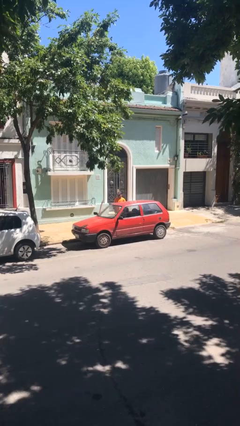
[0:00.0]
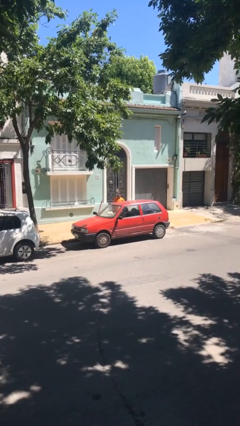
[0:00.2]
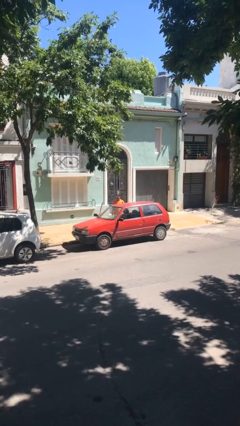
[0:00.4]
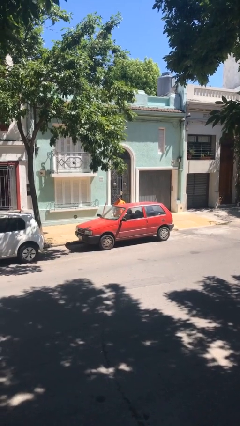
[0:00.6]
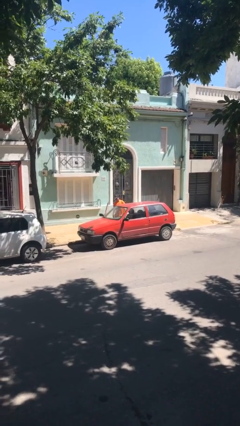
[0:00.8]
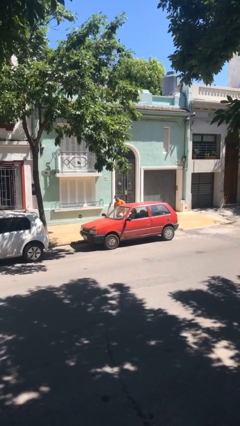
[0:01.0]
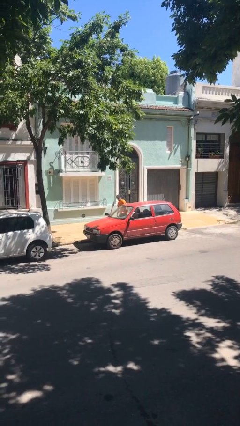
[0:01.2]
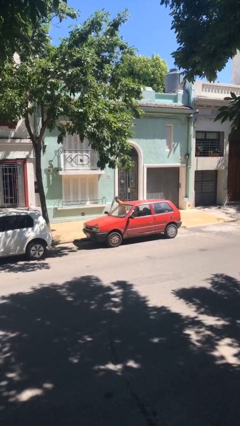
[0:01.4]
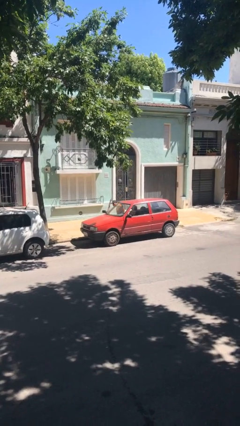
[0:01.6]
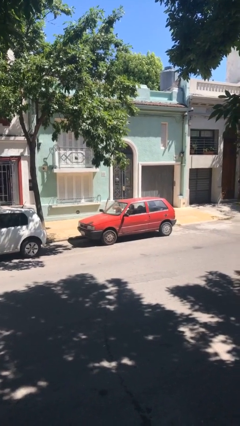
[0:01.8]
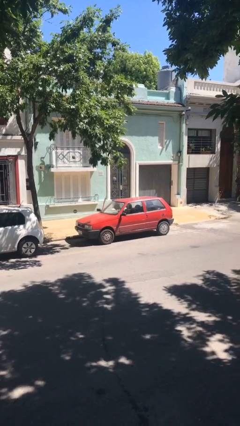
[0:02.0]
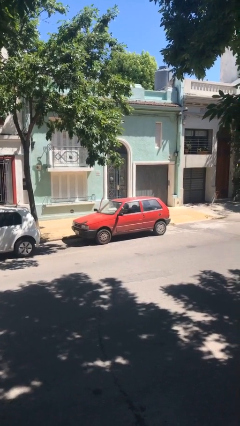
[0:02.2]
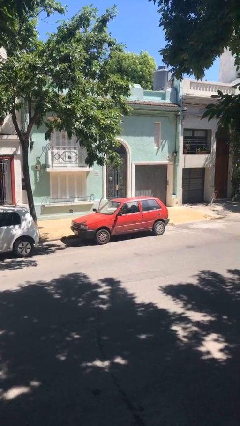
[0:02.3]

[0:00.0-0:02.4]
person enters car

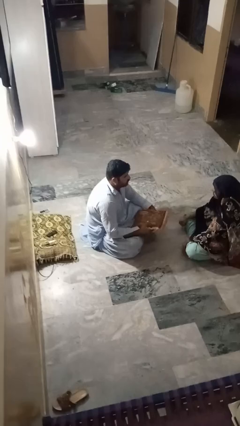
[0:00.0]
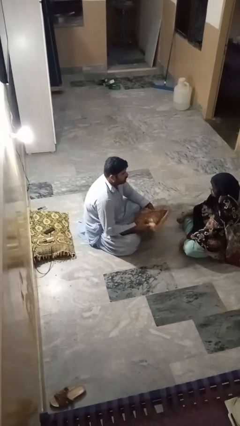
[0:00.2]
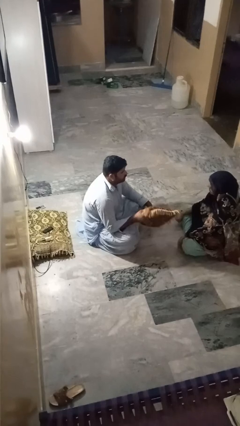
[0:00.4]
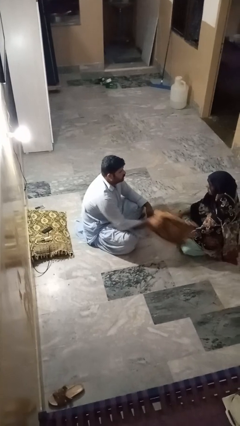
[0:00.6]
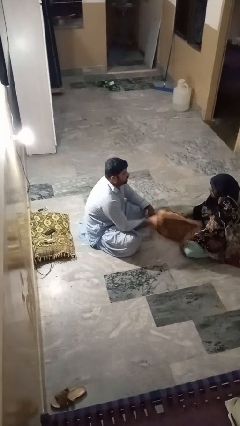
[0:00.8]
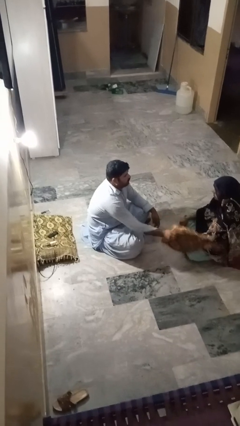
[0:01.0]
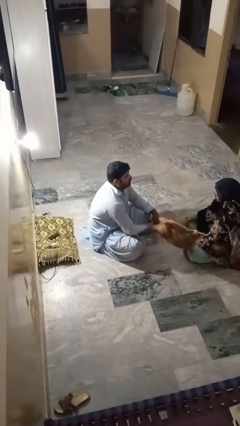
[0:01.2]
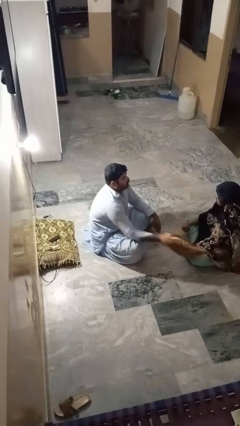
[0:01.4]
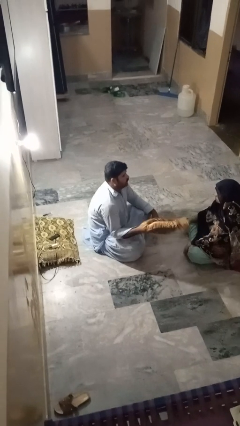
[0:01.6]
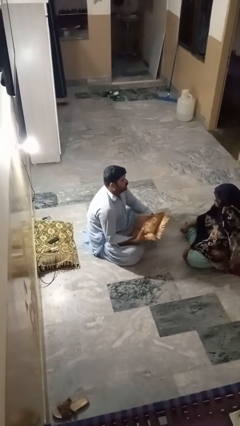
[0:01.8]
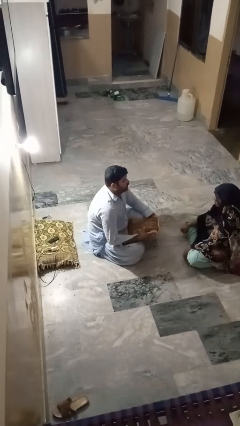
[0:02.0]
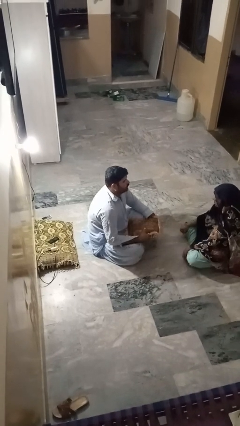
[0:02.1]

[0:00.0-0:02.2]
person hits person with pillow

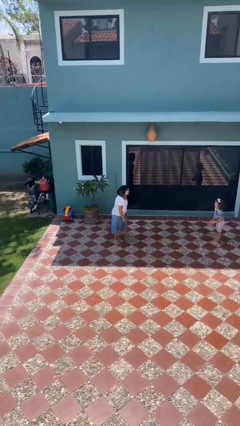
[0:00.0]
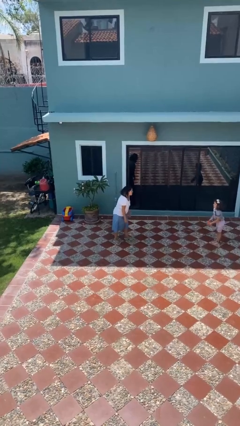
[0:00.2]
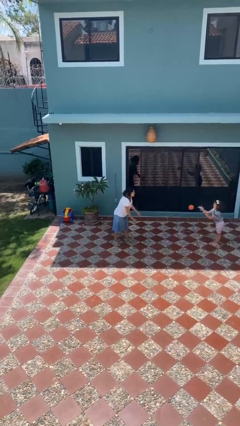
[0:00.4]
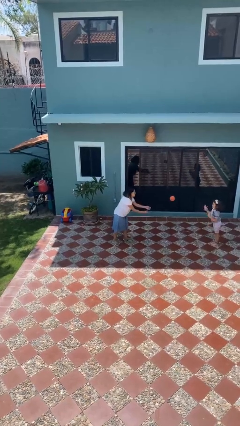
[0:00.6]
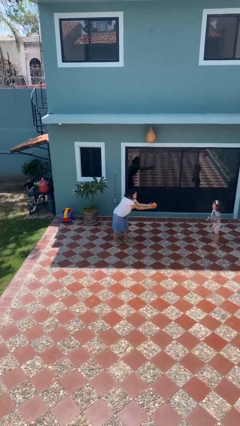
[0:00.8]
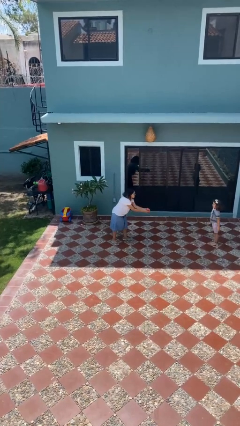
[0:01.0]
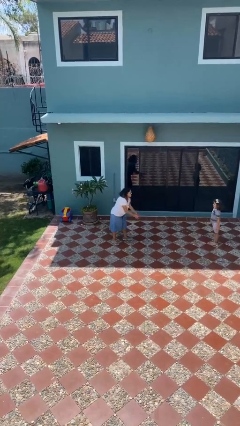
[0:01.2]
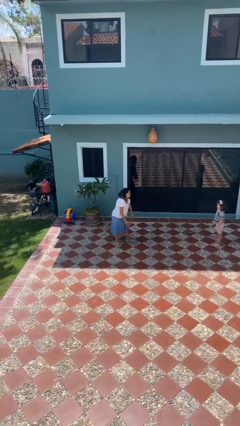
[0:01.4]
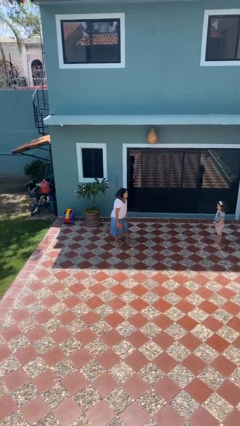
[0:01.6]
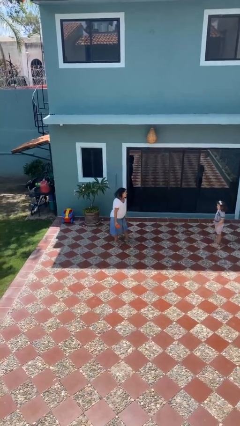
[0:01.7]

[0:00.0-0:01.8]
person catches object from person

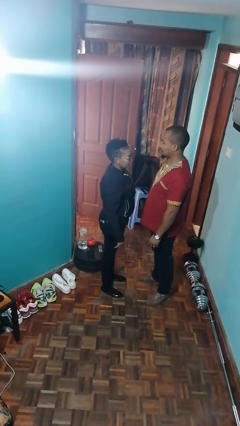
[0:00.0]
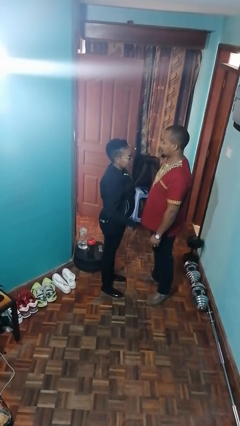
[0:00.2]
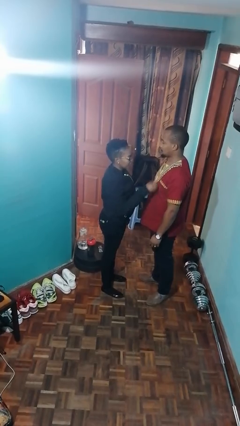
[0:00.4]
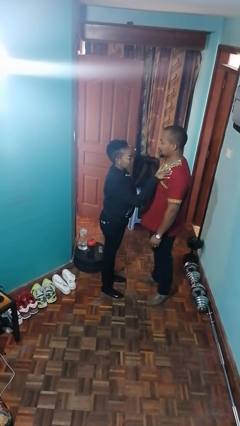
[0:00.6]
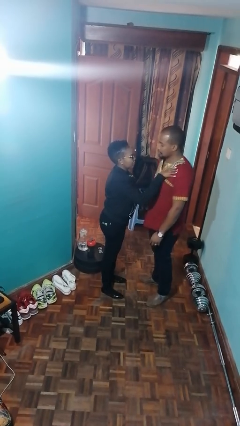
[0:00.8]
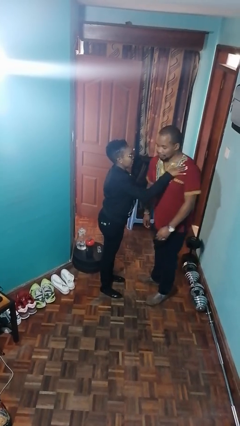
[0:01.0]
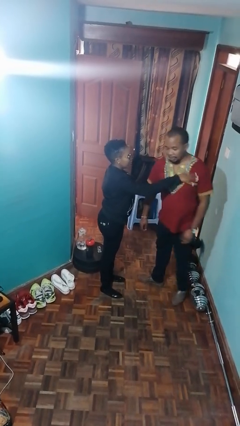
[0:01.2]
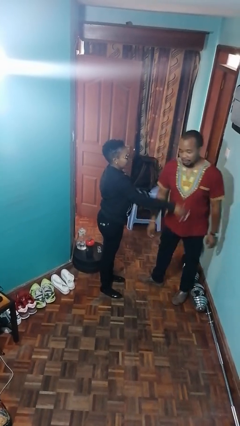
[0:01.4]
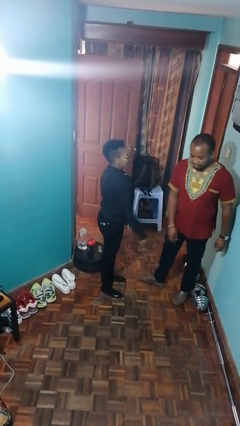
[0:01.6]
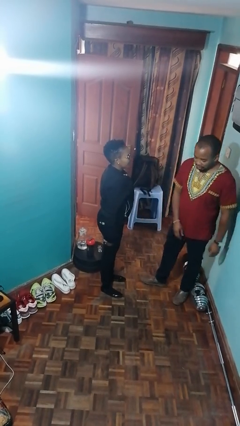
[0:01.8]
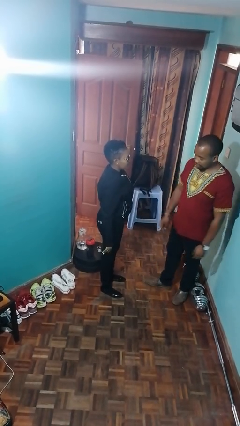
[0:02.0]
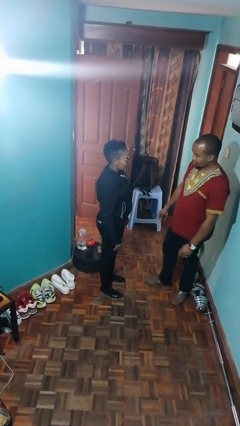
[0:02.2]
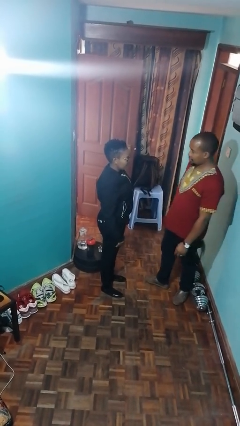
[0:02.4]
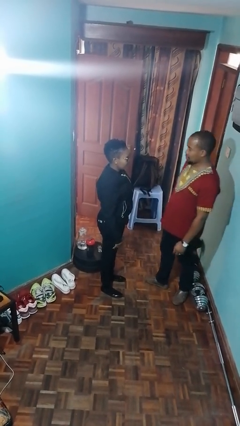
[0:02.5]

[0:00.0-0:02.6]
person shoves person
